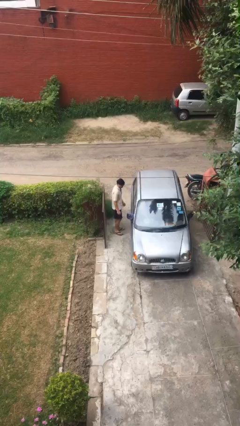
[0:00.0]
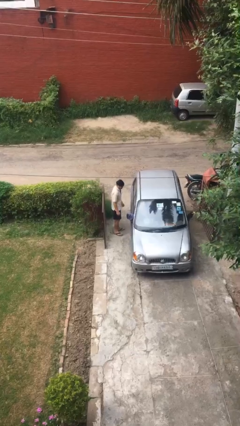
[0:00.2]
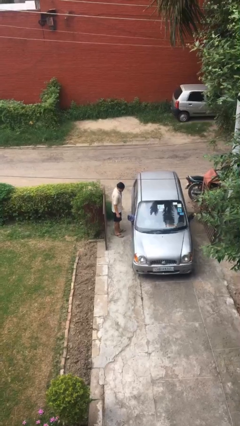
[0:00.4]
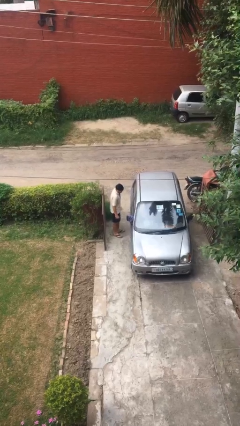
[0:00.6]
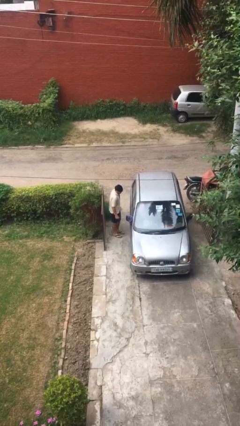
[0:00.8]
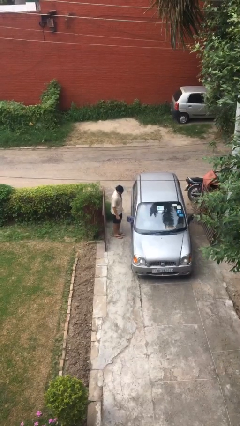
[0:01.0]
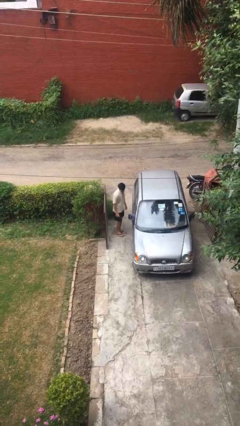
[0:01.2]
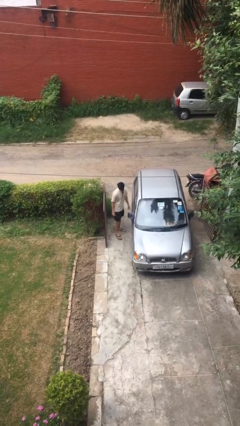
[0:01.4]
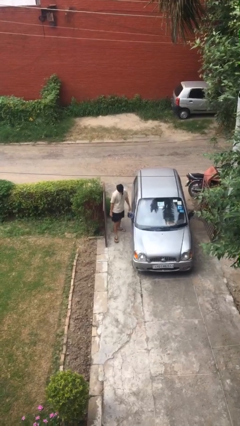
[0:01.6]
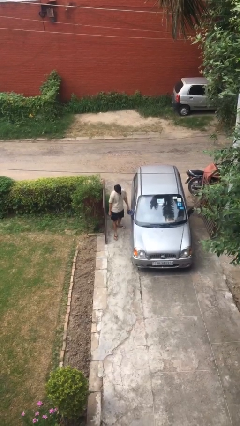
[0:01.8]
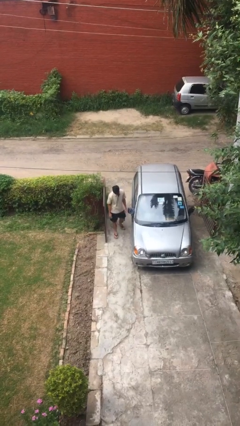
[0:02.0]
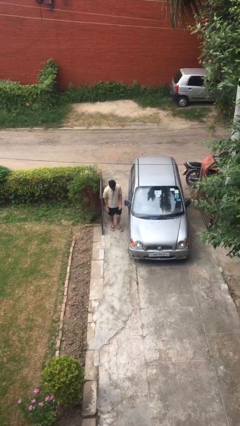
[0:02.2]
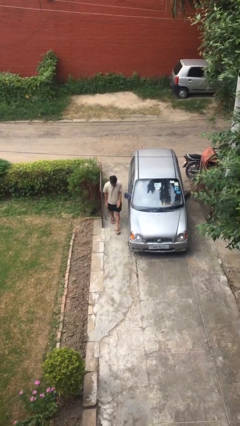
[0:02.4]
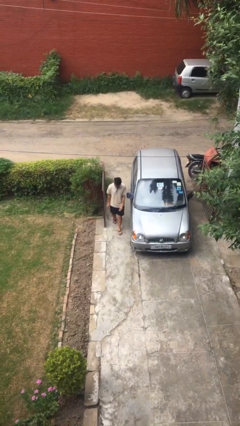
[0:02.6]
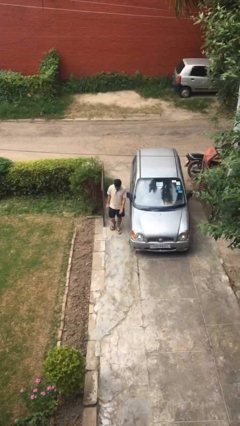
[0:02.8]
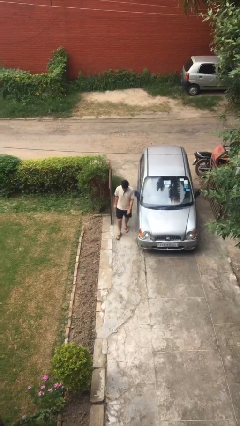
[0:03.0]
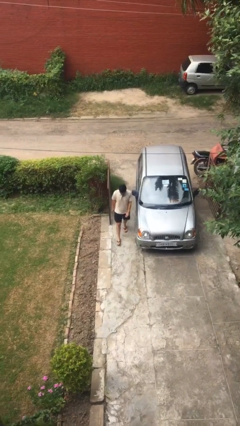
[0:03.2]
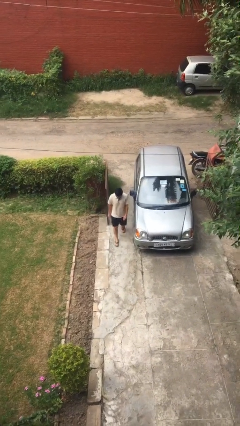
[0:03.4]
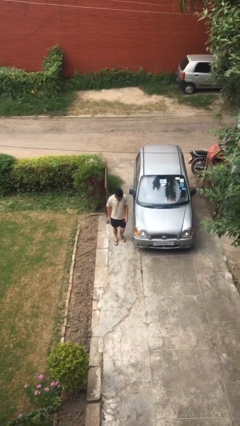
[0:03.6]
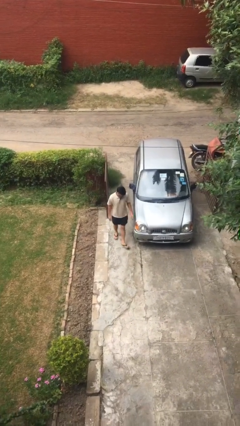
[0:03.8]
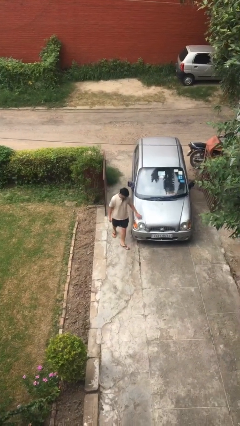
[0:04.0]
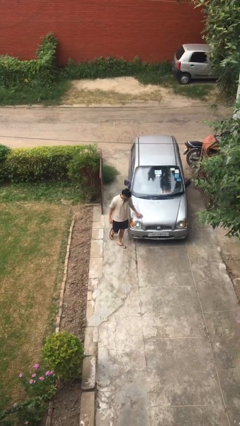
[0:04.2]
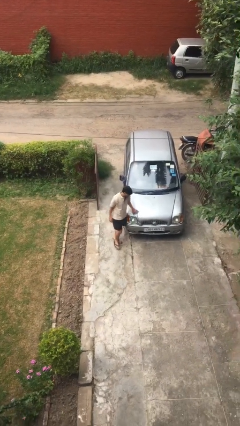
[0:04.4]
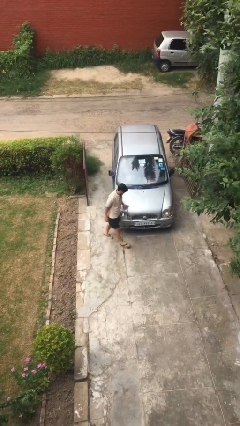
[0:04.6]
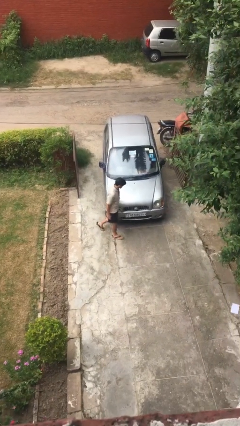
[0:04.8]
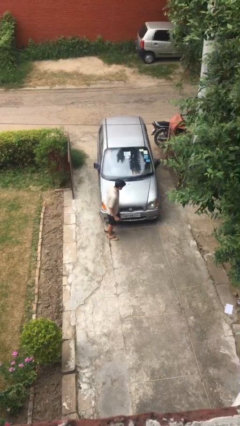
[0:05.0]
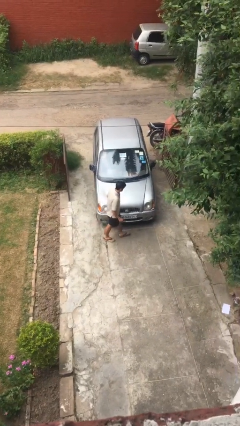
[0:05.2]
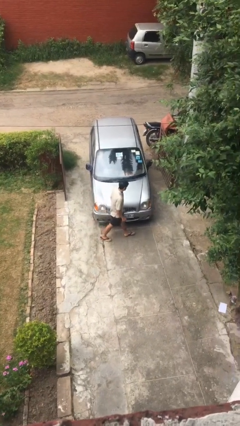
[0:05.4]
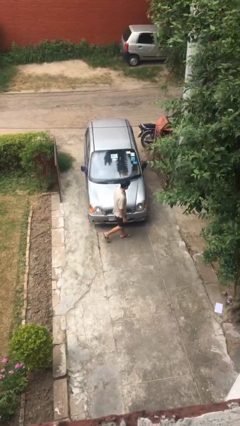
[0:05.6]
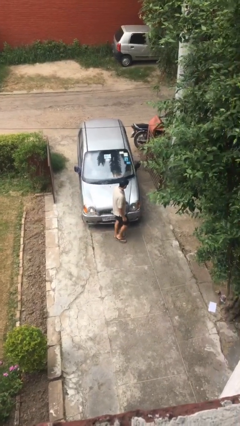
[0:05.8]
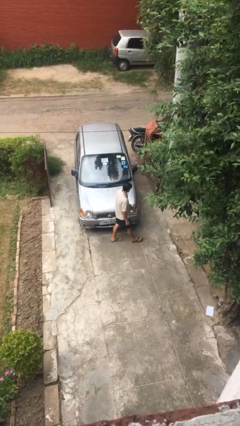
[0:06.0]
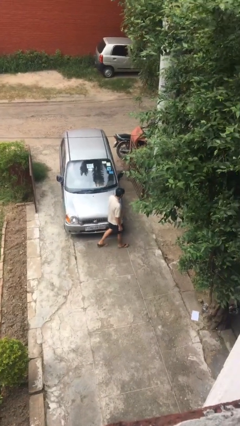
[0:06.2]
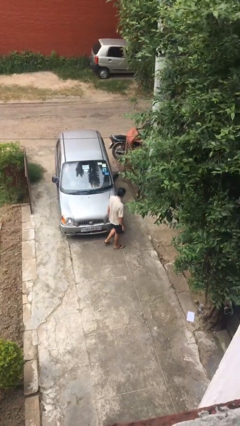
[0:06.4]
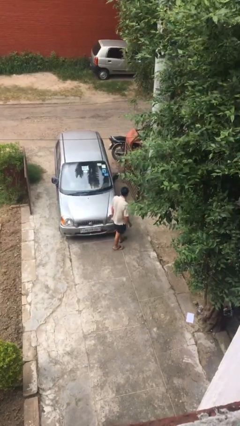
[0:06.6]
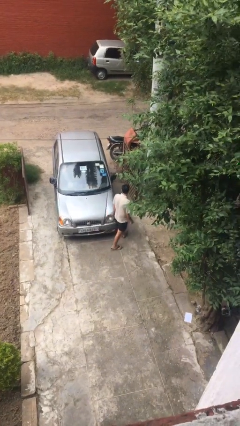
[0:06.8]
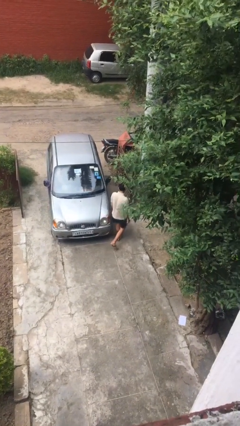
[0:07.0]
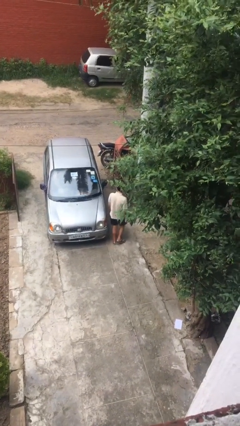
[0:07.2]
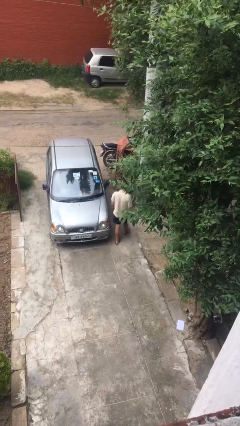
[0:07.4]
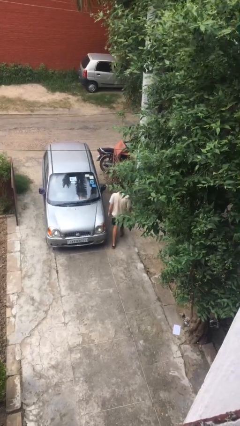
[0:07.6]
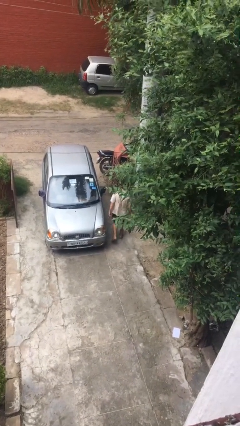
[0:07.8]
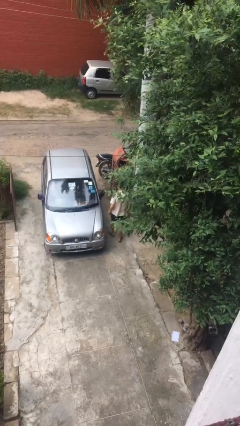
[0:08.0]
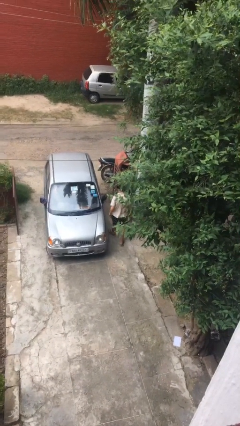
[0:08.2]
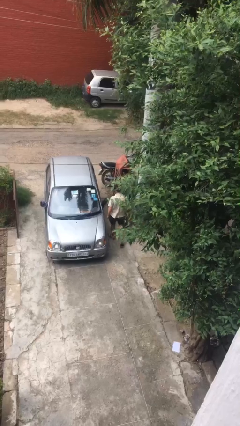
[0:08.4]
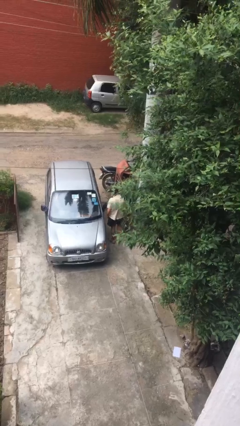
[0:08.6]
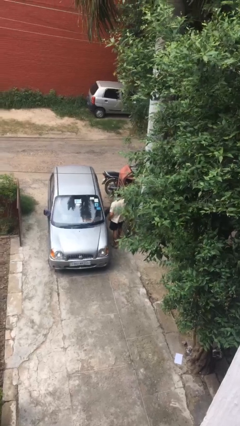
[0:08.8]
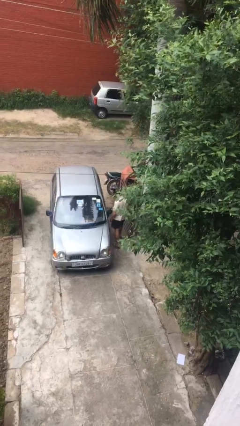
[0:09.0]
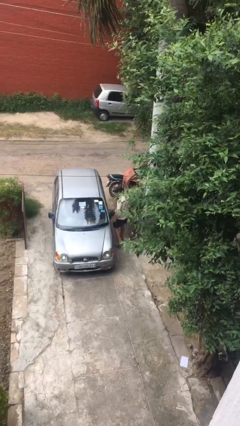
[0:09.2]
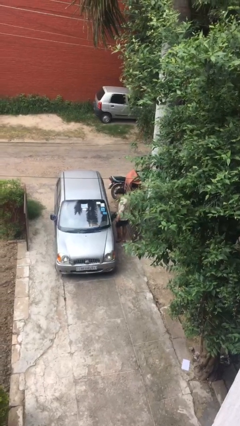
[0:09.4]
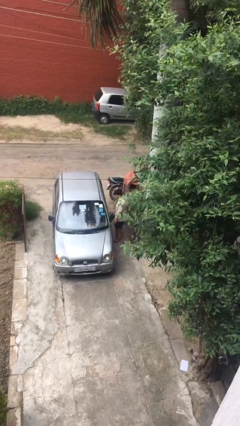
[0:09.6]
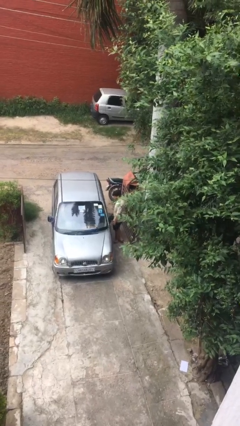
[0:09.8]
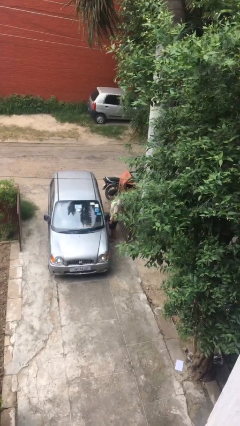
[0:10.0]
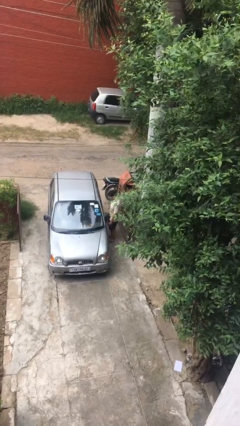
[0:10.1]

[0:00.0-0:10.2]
person walks around car

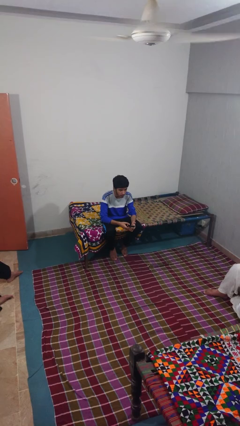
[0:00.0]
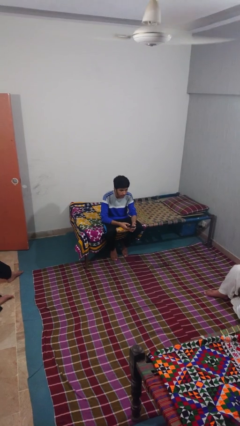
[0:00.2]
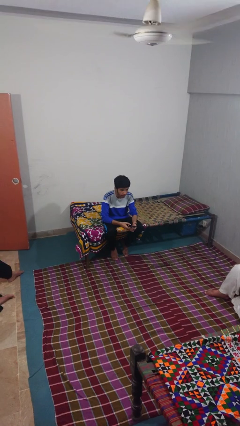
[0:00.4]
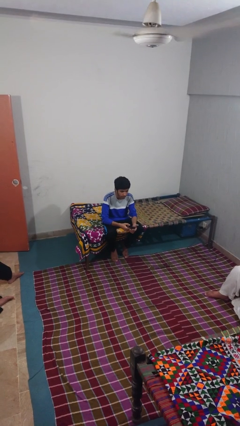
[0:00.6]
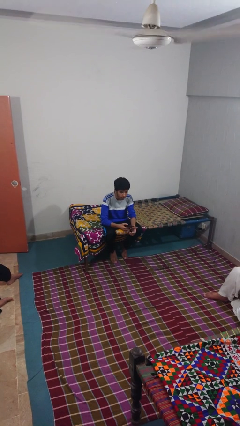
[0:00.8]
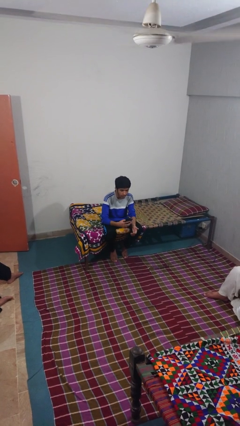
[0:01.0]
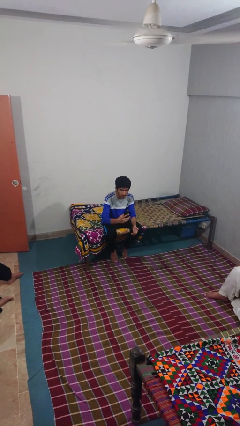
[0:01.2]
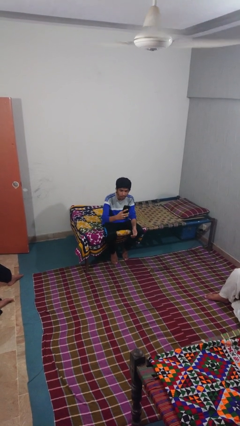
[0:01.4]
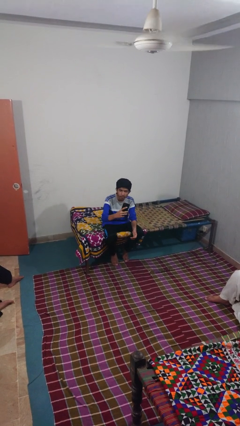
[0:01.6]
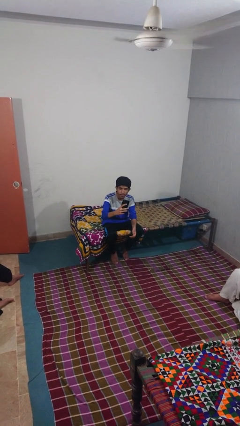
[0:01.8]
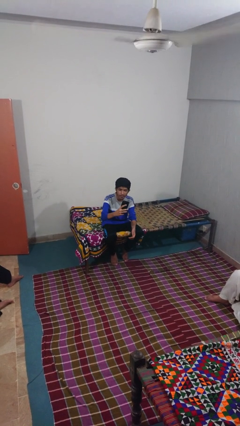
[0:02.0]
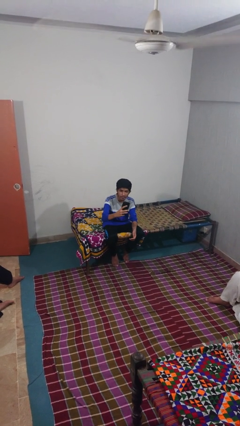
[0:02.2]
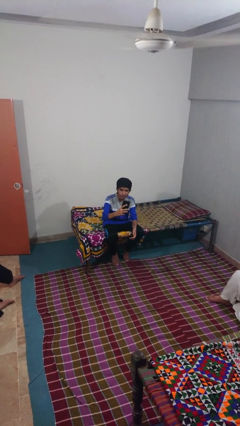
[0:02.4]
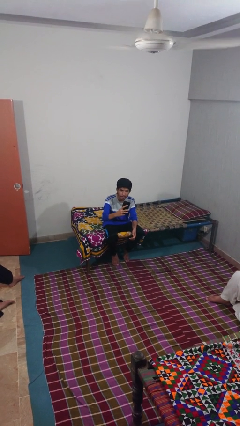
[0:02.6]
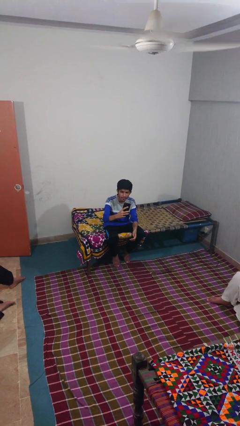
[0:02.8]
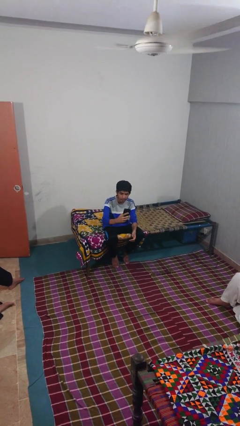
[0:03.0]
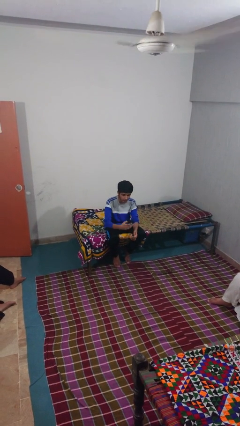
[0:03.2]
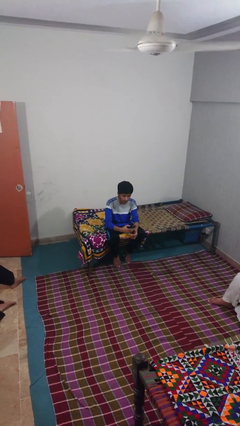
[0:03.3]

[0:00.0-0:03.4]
person takes selfie

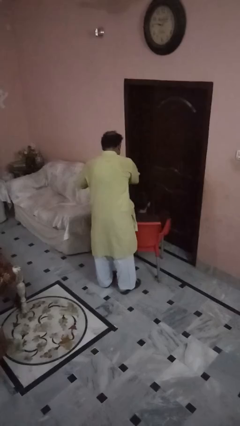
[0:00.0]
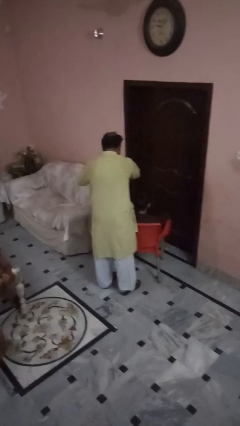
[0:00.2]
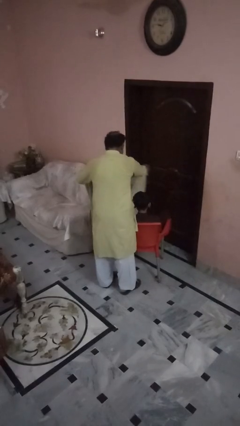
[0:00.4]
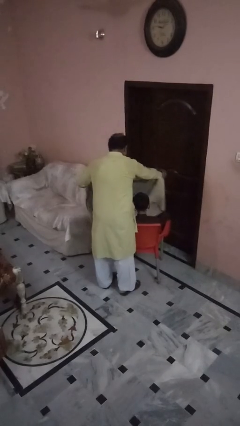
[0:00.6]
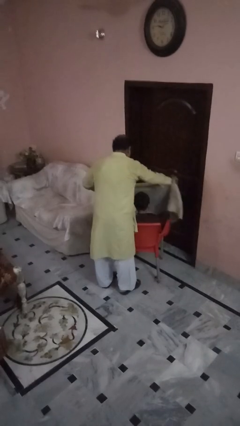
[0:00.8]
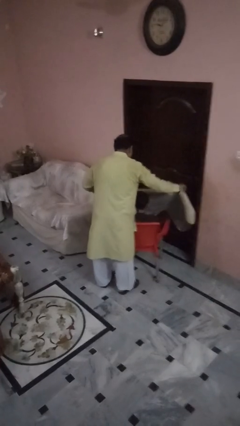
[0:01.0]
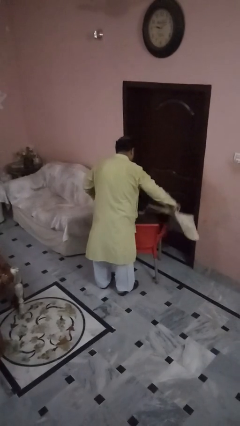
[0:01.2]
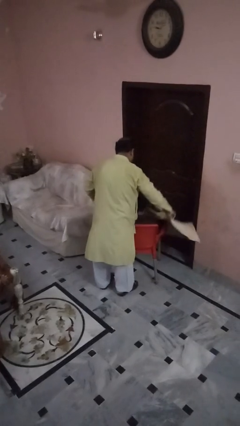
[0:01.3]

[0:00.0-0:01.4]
person uncovers friend with blanket

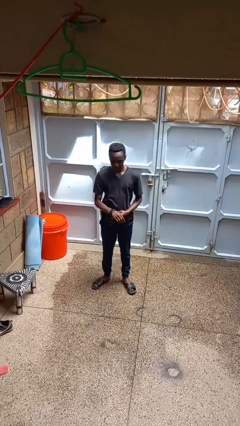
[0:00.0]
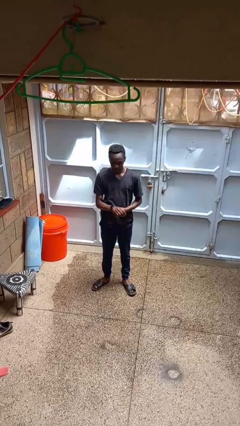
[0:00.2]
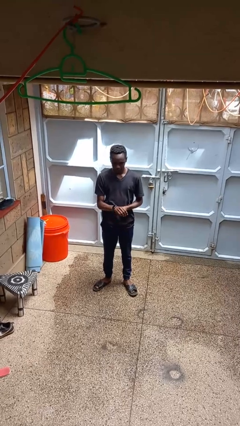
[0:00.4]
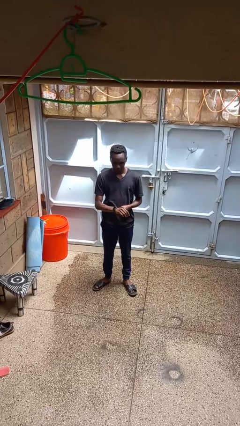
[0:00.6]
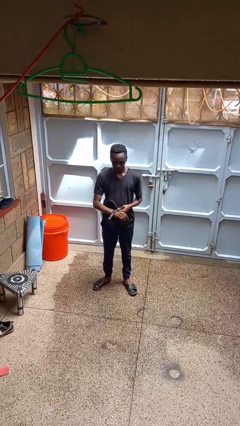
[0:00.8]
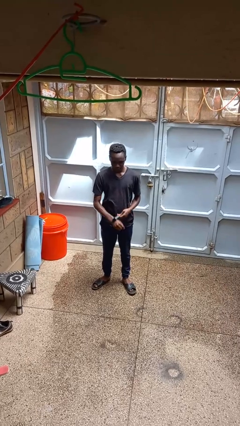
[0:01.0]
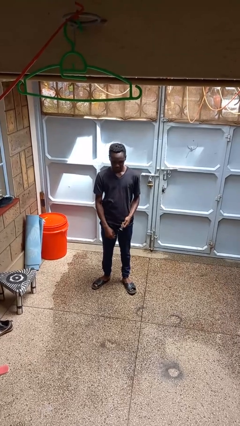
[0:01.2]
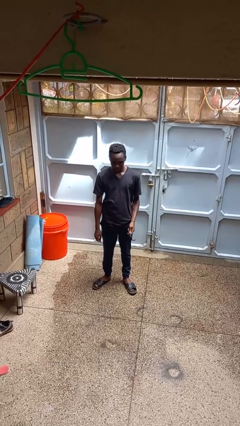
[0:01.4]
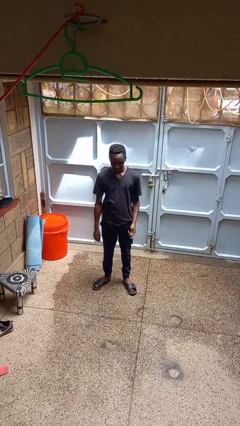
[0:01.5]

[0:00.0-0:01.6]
person takes off wristwatch

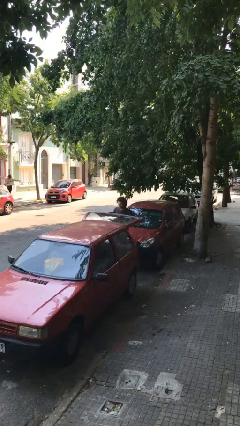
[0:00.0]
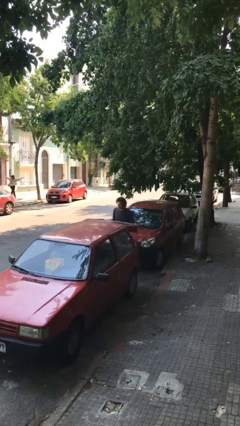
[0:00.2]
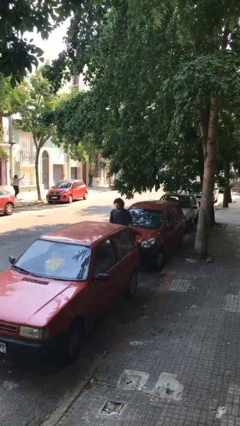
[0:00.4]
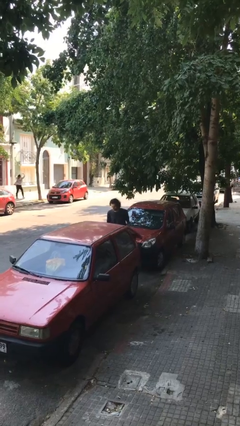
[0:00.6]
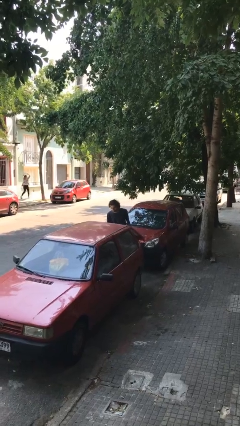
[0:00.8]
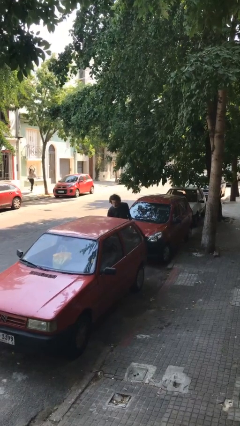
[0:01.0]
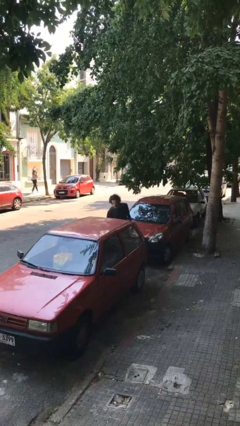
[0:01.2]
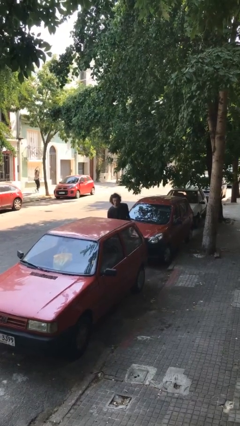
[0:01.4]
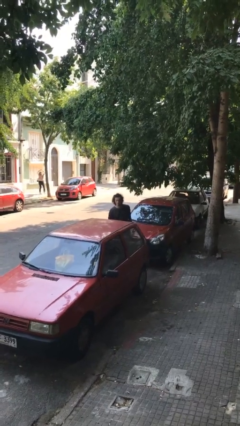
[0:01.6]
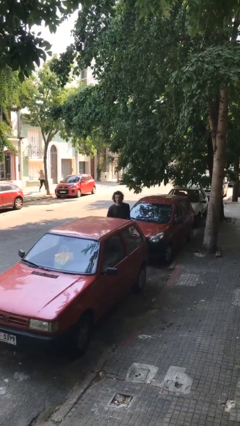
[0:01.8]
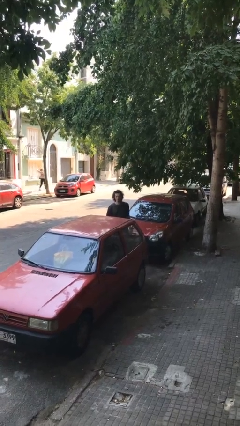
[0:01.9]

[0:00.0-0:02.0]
person closes car trunk
